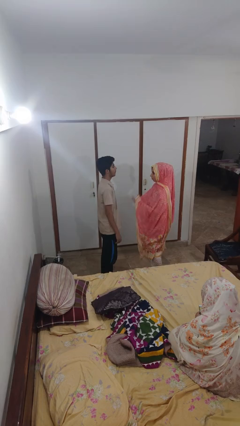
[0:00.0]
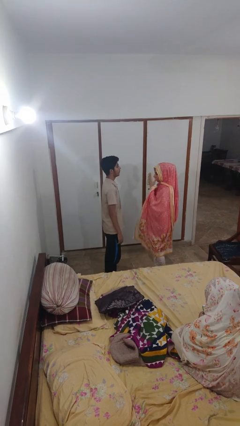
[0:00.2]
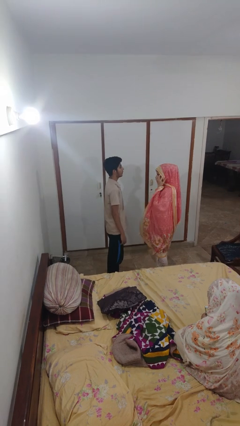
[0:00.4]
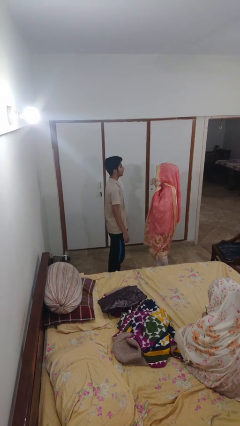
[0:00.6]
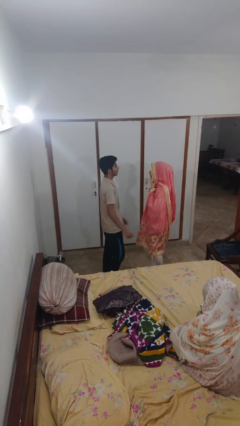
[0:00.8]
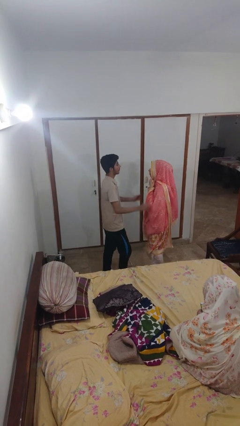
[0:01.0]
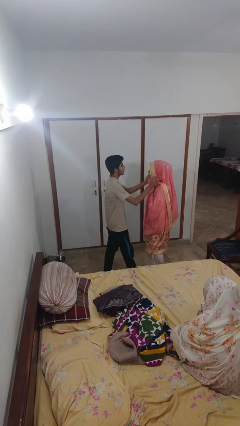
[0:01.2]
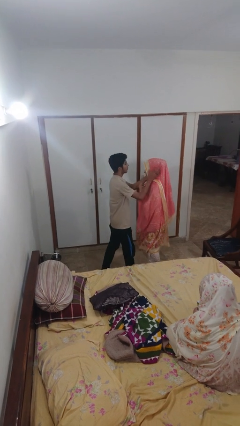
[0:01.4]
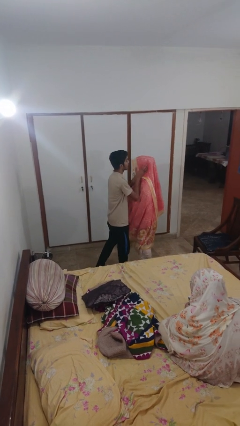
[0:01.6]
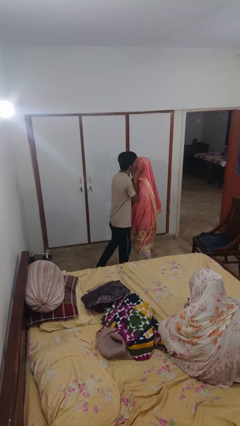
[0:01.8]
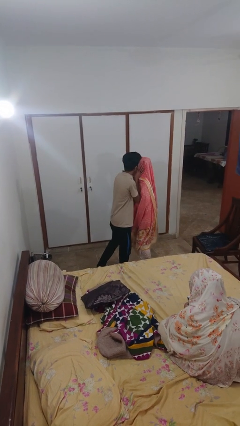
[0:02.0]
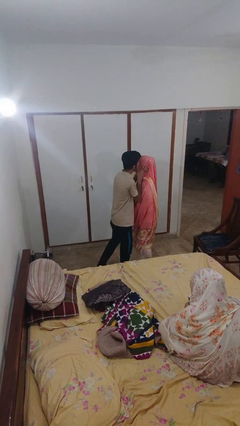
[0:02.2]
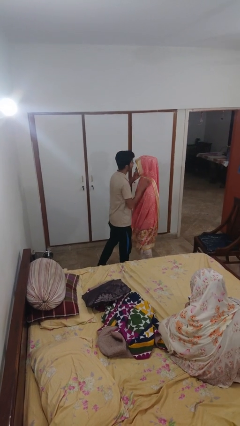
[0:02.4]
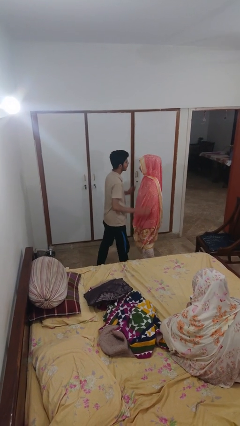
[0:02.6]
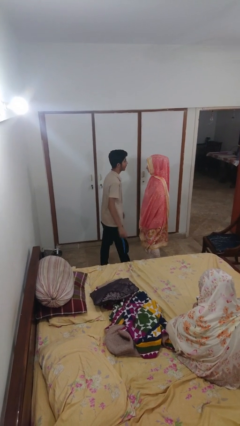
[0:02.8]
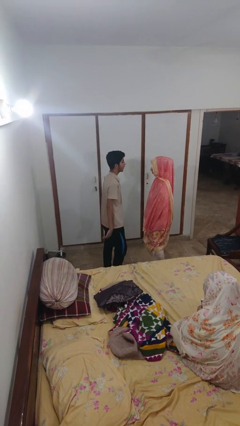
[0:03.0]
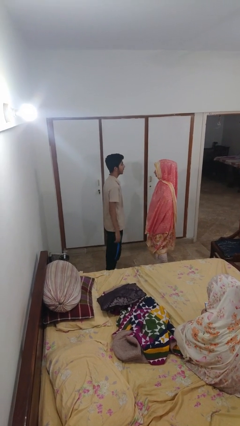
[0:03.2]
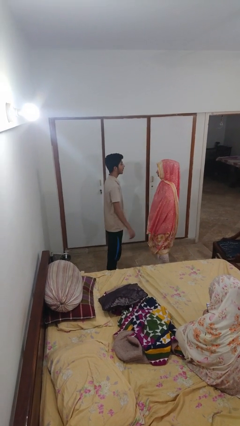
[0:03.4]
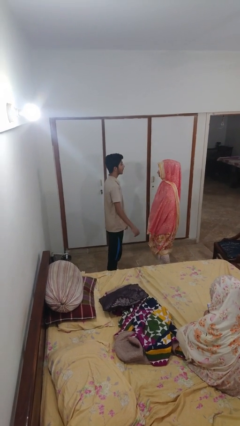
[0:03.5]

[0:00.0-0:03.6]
person kisses cheek of person

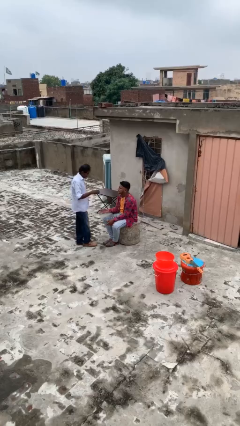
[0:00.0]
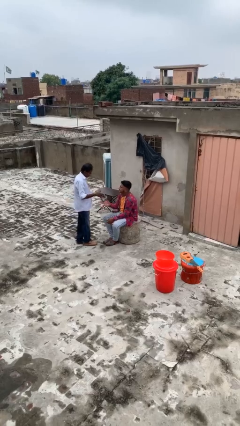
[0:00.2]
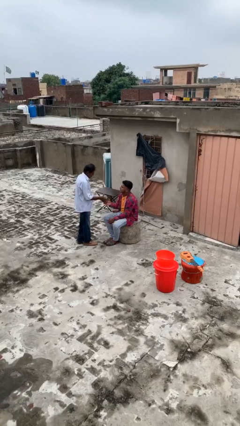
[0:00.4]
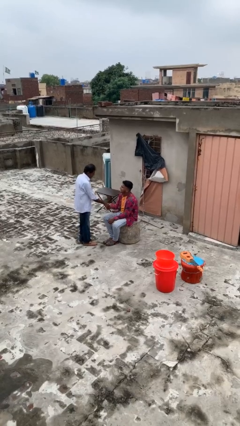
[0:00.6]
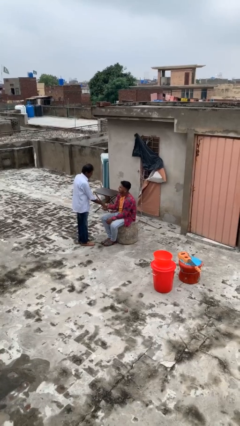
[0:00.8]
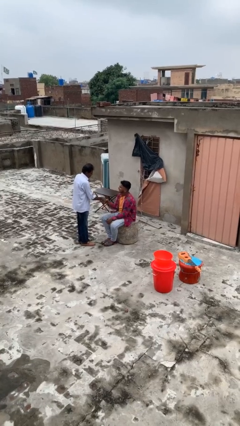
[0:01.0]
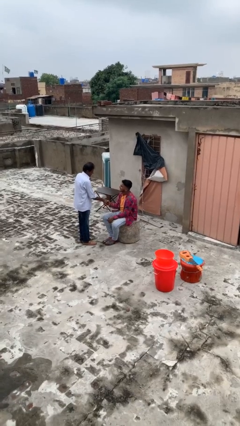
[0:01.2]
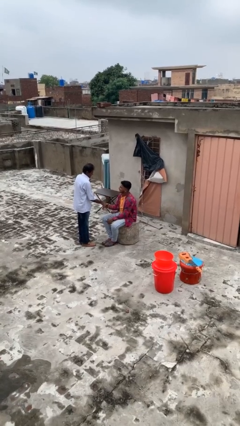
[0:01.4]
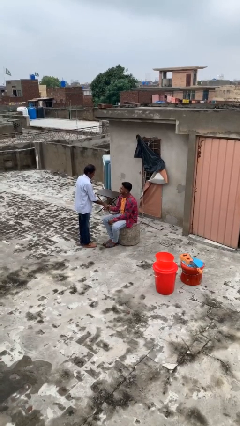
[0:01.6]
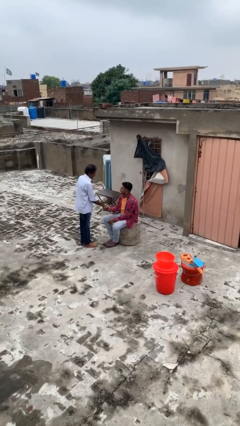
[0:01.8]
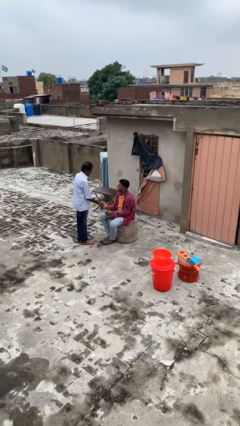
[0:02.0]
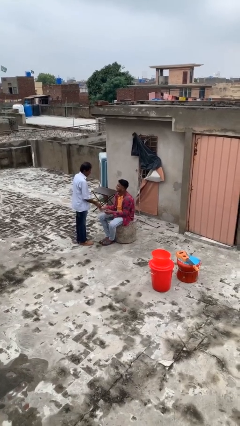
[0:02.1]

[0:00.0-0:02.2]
person shakes hand

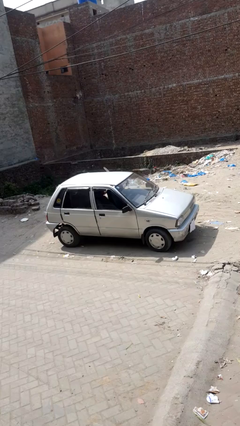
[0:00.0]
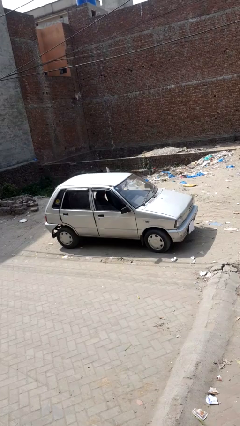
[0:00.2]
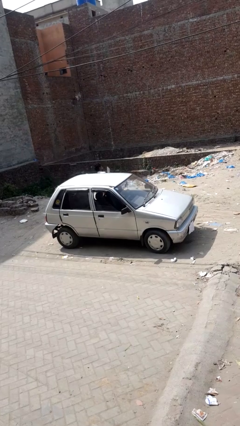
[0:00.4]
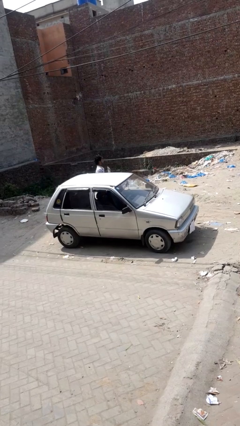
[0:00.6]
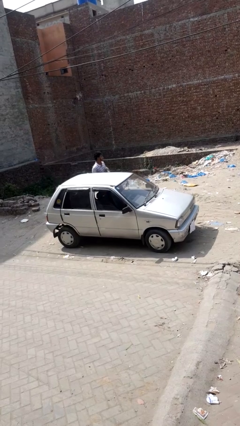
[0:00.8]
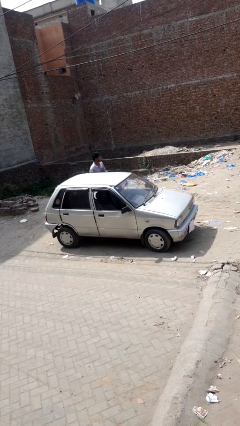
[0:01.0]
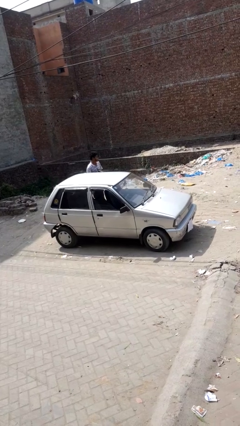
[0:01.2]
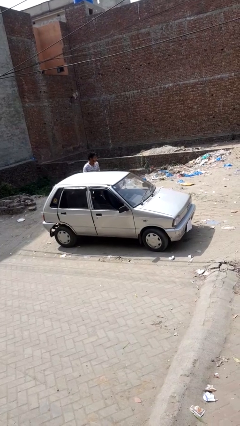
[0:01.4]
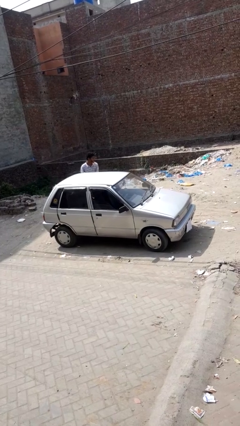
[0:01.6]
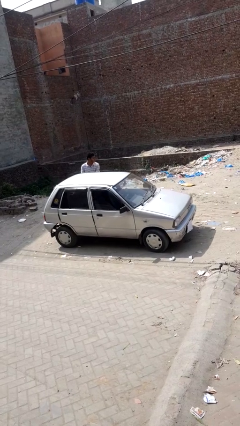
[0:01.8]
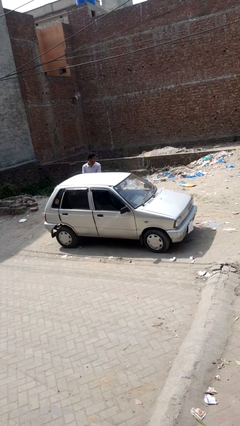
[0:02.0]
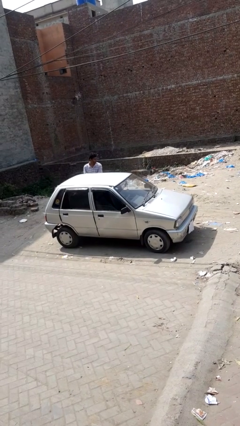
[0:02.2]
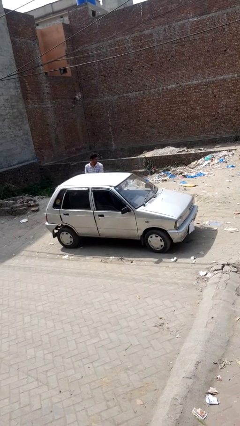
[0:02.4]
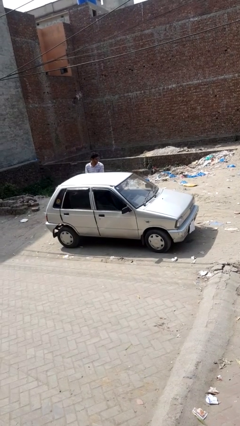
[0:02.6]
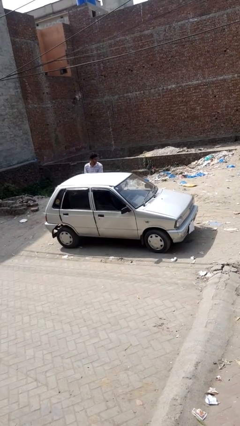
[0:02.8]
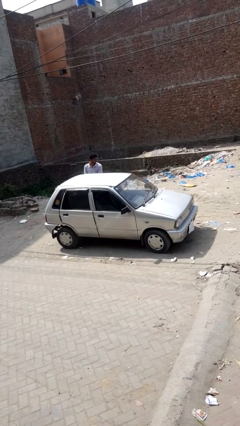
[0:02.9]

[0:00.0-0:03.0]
car drops off person

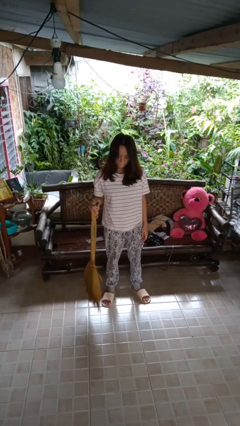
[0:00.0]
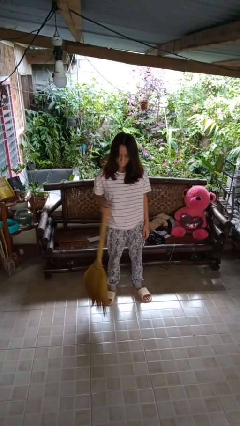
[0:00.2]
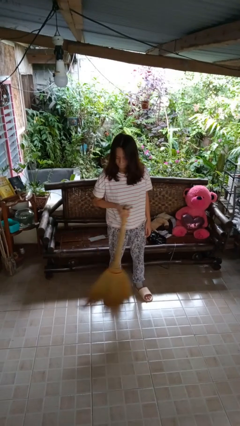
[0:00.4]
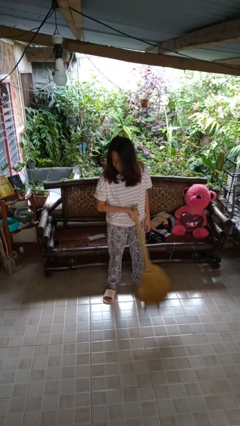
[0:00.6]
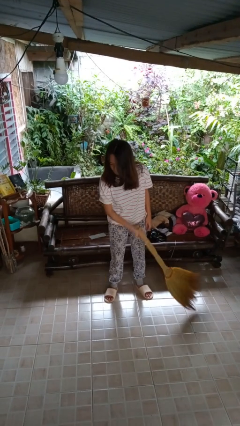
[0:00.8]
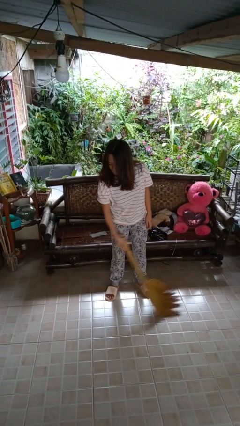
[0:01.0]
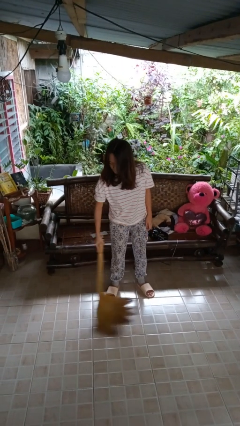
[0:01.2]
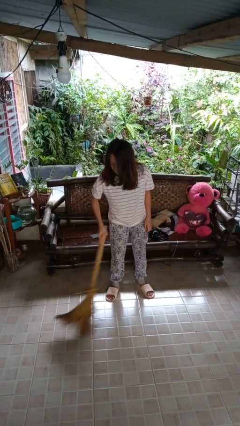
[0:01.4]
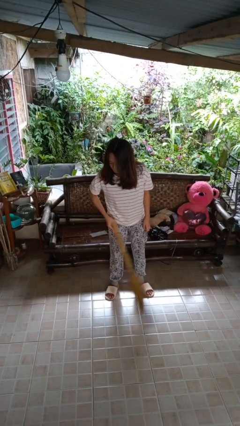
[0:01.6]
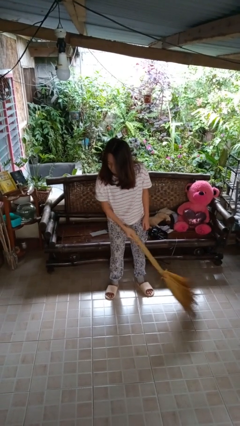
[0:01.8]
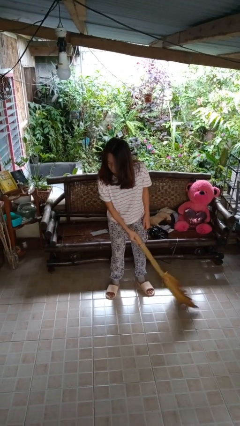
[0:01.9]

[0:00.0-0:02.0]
person sweeps floor

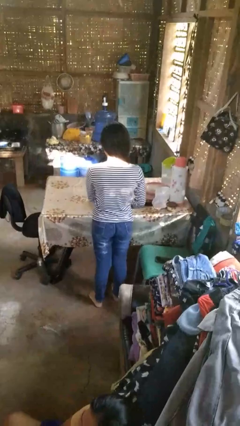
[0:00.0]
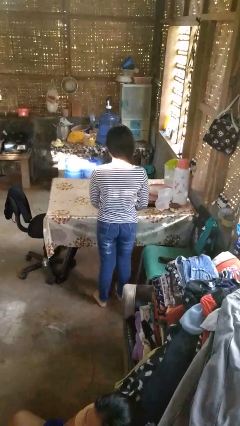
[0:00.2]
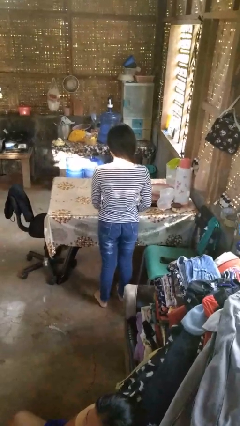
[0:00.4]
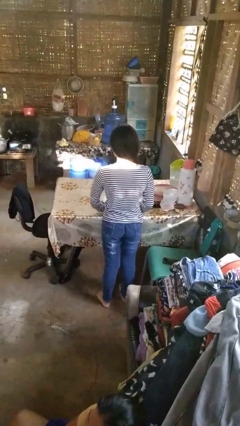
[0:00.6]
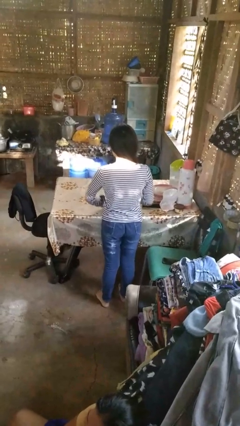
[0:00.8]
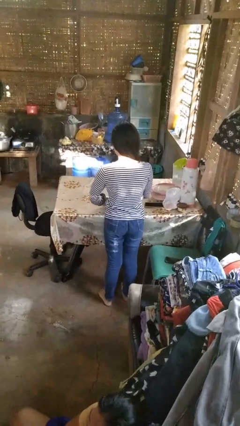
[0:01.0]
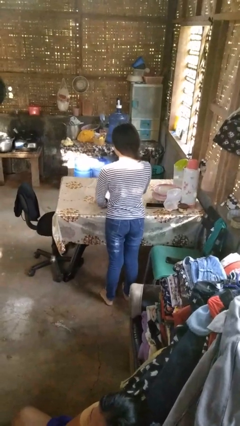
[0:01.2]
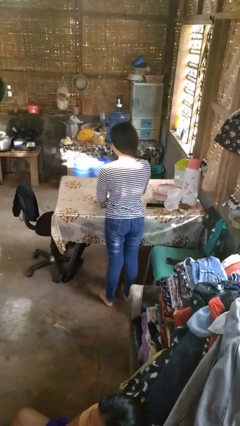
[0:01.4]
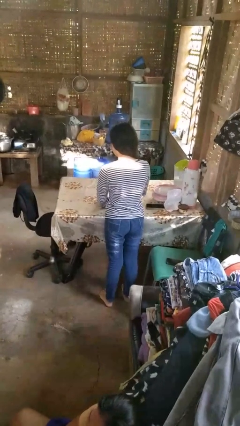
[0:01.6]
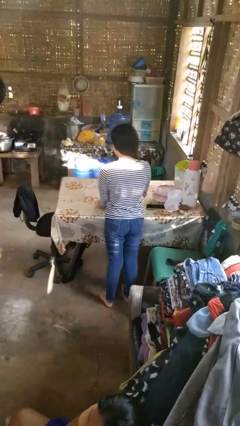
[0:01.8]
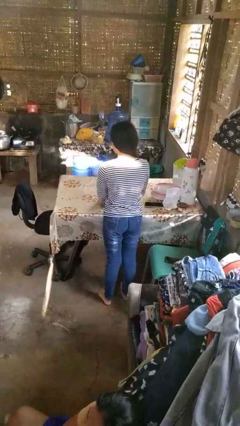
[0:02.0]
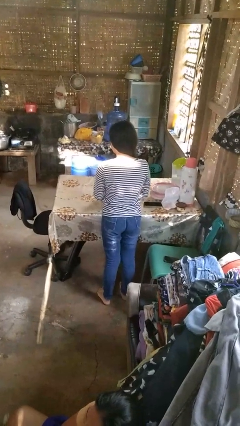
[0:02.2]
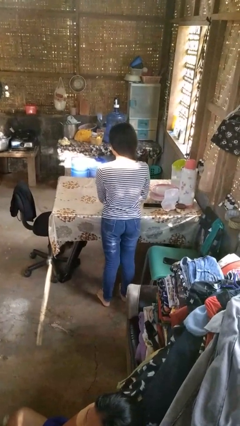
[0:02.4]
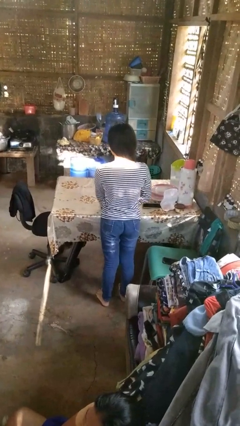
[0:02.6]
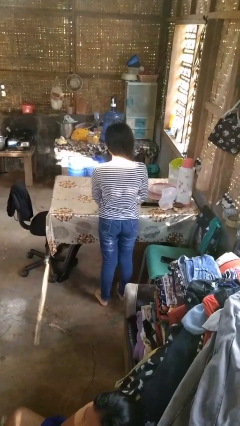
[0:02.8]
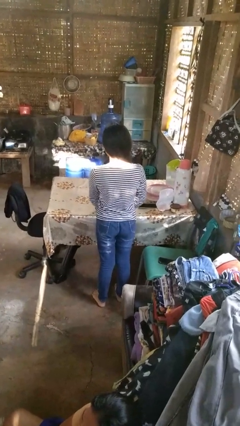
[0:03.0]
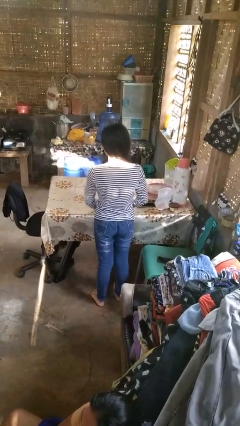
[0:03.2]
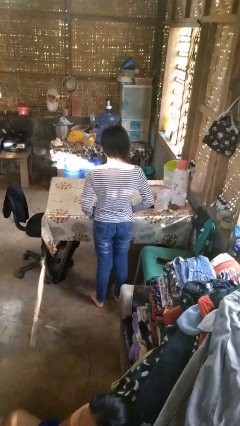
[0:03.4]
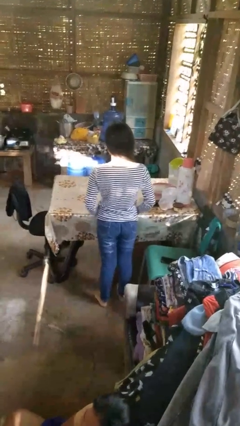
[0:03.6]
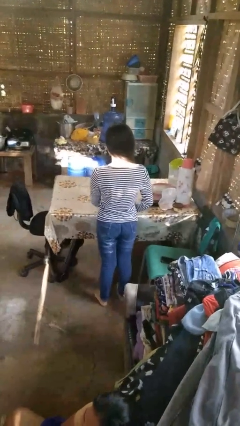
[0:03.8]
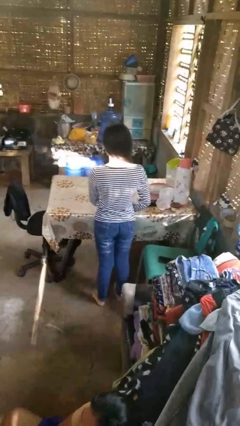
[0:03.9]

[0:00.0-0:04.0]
person folds tablecloth

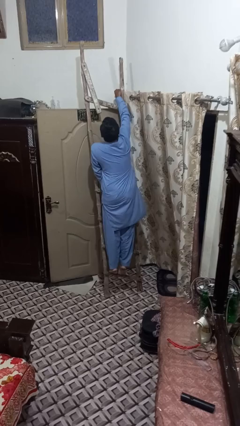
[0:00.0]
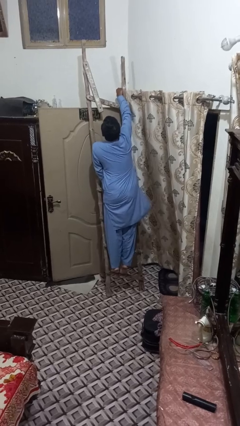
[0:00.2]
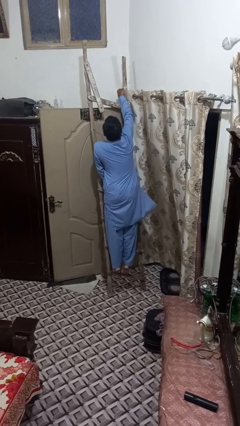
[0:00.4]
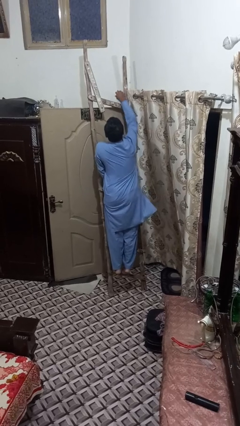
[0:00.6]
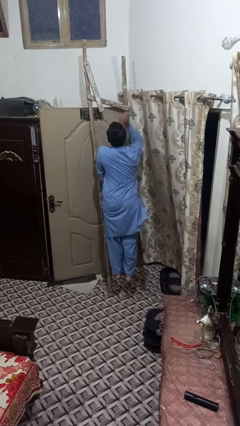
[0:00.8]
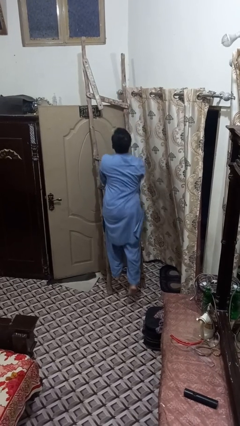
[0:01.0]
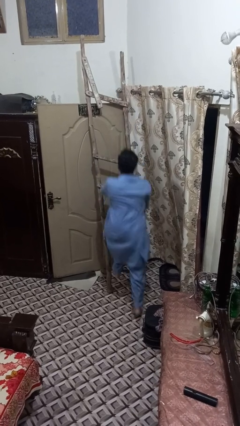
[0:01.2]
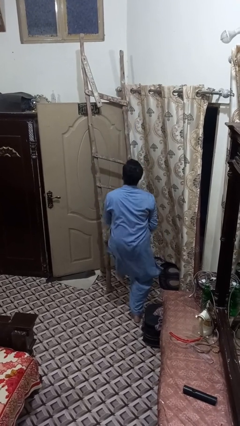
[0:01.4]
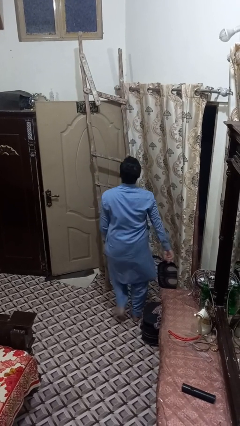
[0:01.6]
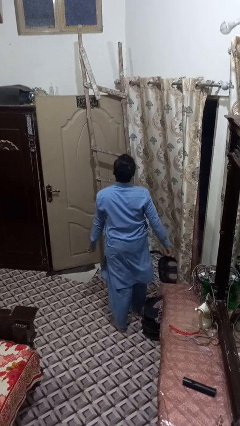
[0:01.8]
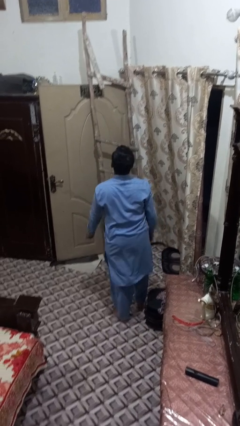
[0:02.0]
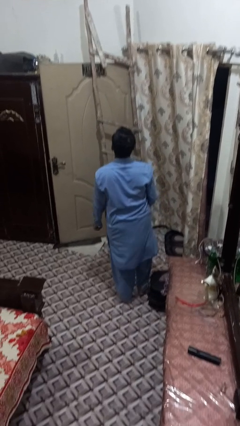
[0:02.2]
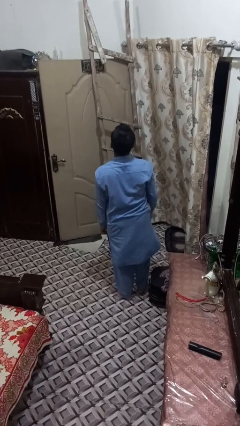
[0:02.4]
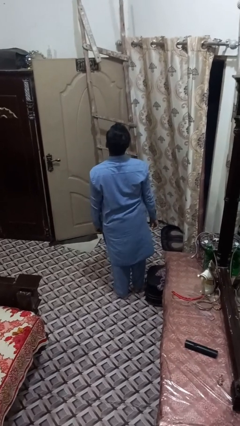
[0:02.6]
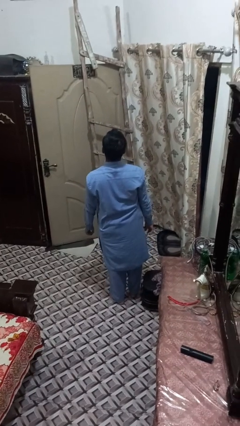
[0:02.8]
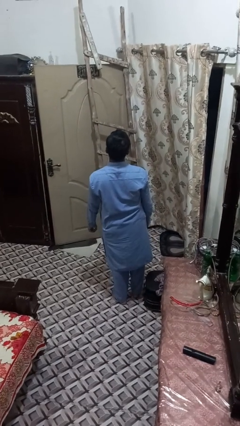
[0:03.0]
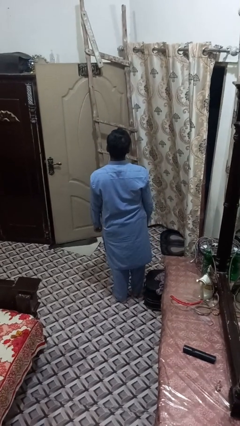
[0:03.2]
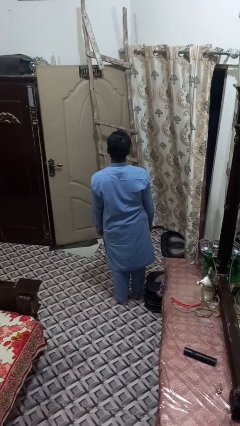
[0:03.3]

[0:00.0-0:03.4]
person climbs down ladder
